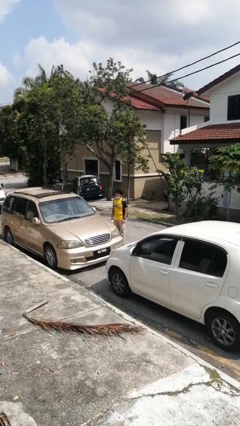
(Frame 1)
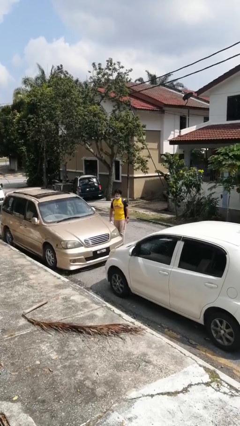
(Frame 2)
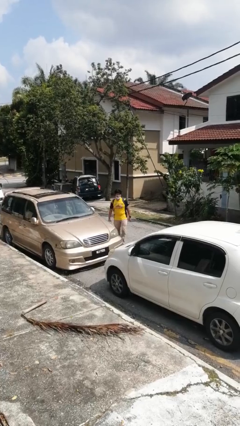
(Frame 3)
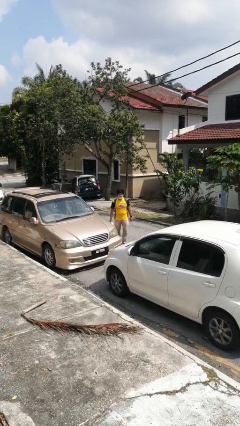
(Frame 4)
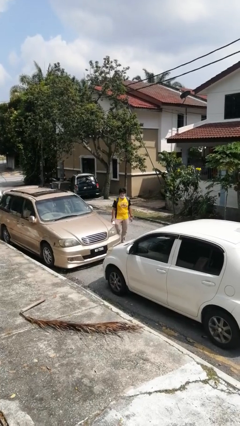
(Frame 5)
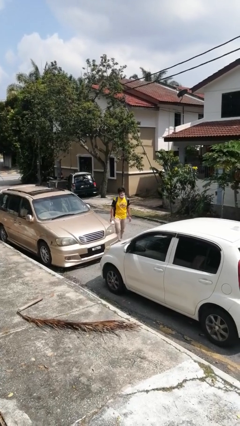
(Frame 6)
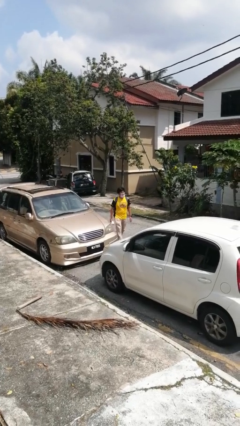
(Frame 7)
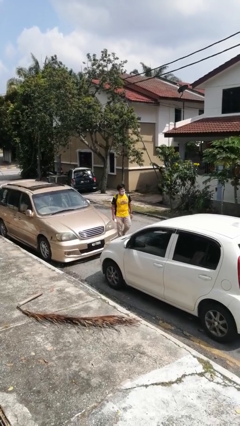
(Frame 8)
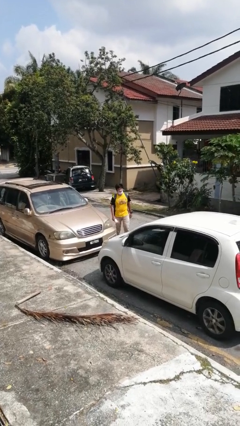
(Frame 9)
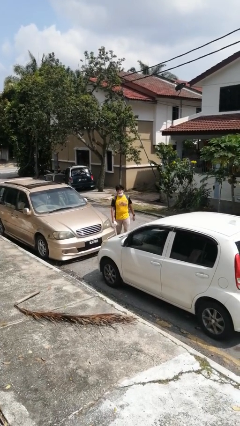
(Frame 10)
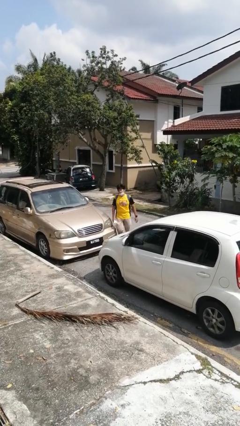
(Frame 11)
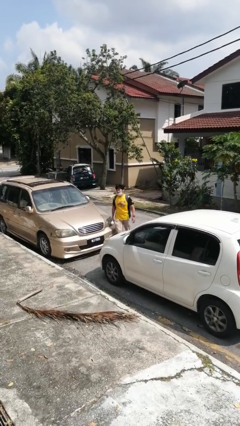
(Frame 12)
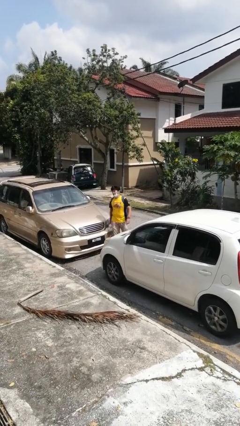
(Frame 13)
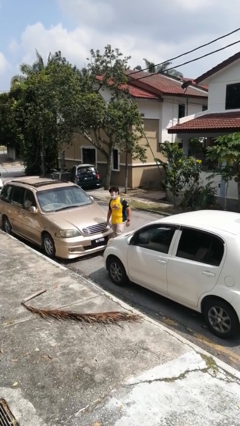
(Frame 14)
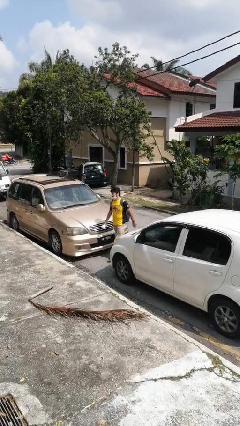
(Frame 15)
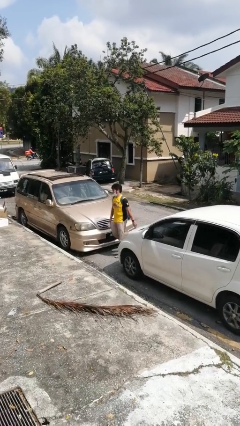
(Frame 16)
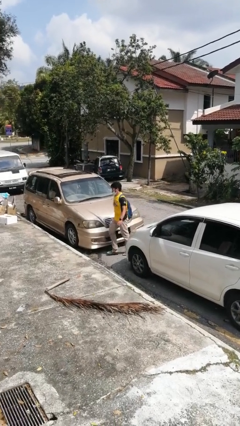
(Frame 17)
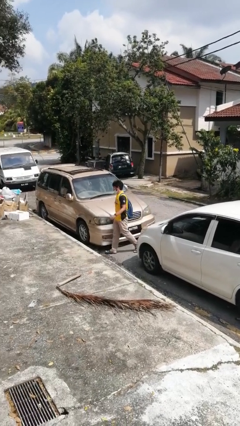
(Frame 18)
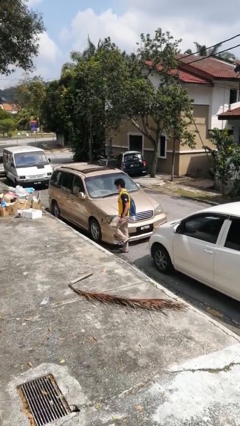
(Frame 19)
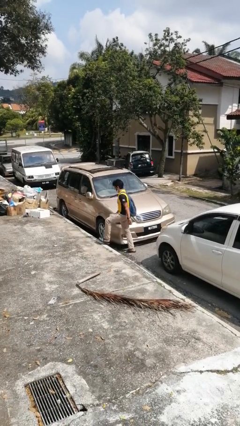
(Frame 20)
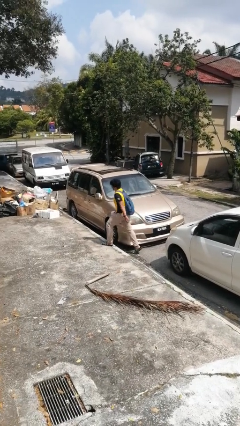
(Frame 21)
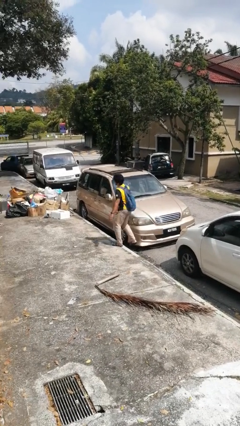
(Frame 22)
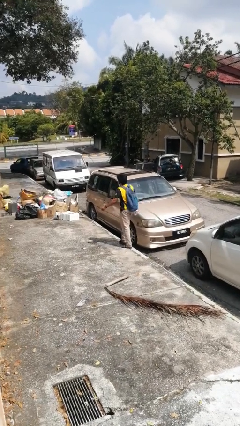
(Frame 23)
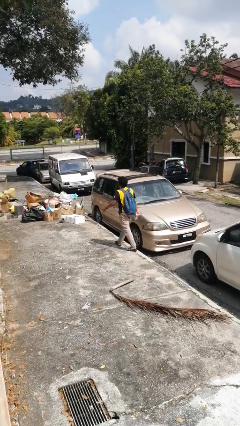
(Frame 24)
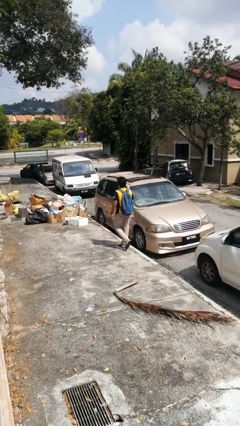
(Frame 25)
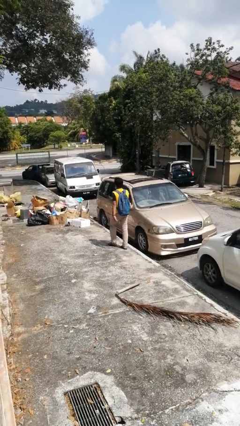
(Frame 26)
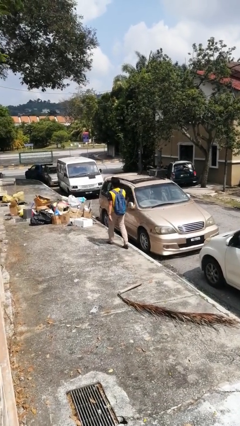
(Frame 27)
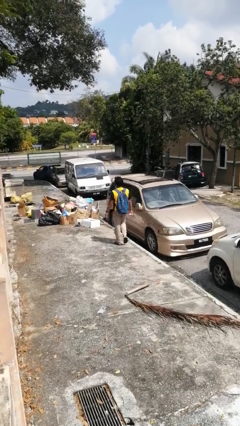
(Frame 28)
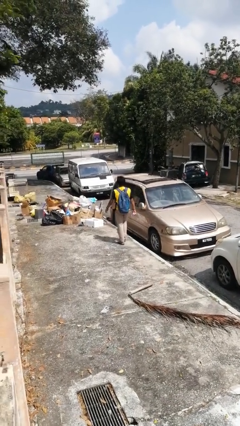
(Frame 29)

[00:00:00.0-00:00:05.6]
person walks around car

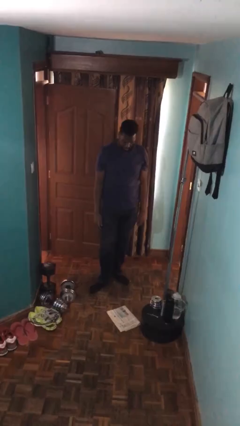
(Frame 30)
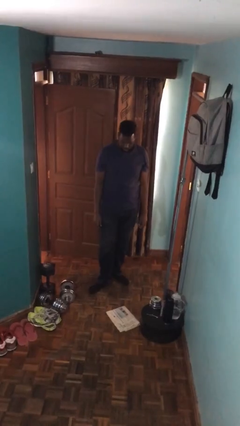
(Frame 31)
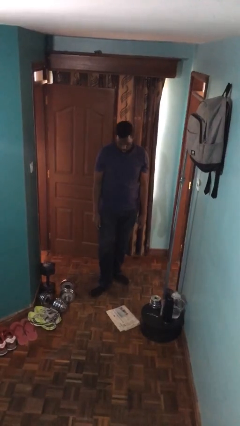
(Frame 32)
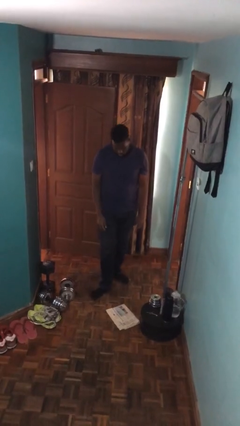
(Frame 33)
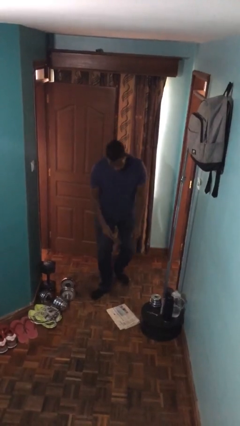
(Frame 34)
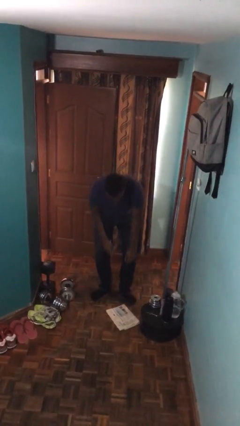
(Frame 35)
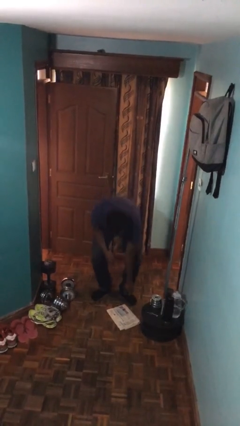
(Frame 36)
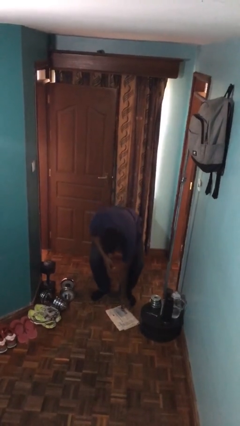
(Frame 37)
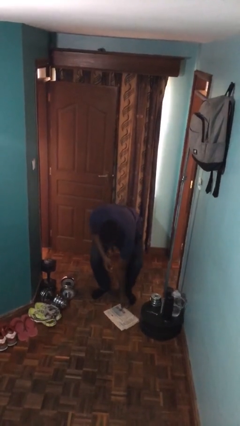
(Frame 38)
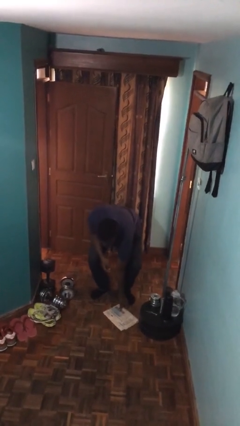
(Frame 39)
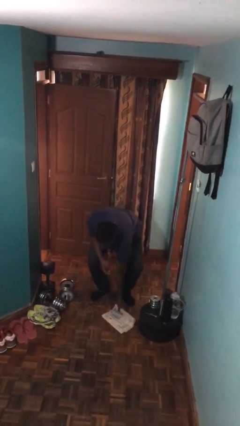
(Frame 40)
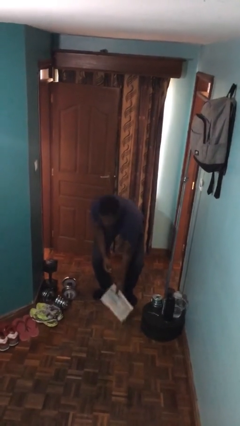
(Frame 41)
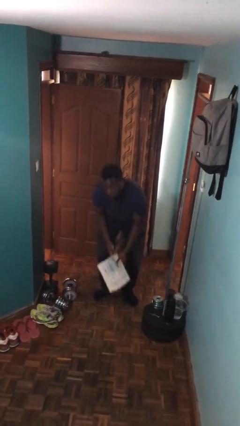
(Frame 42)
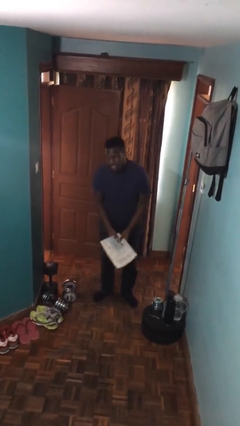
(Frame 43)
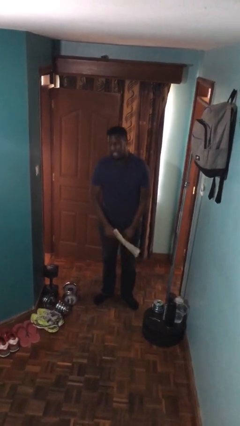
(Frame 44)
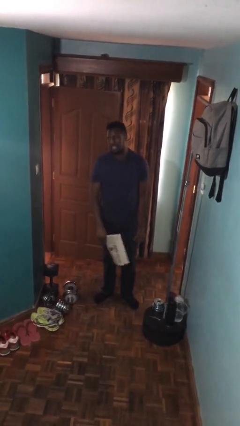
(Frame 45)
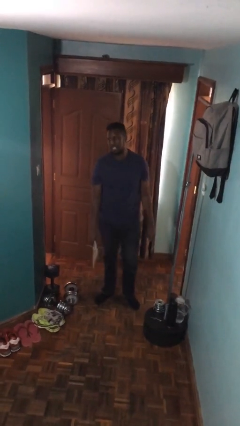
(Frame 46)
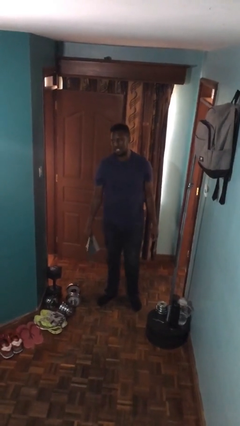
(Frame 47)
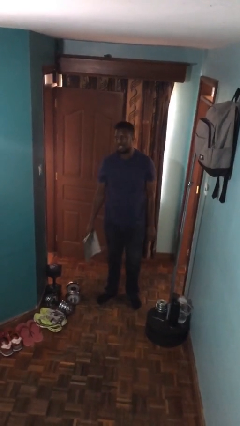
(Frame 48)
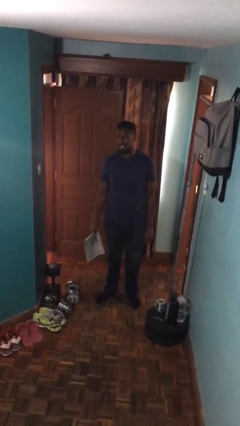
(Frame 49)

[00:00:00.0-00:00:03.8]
person picks up object from floor

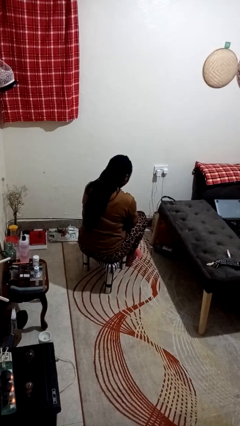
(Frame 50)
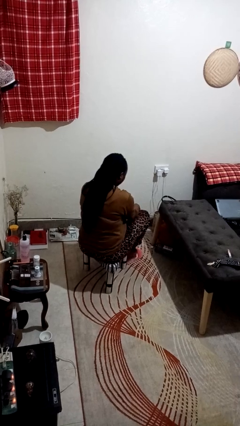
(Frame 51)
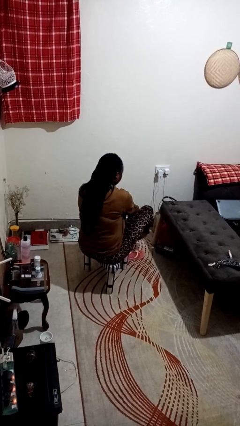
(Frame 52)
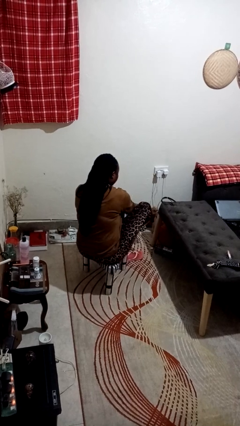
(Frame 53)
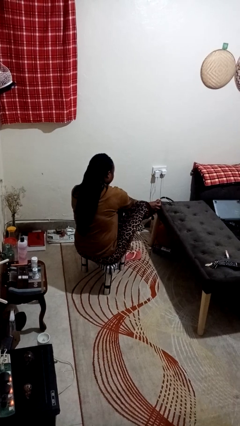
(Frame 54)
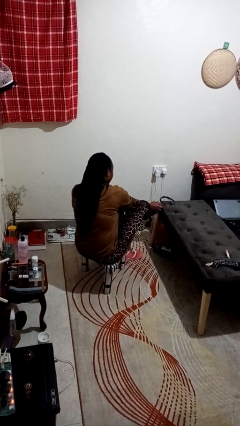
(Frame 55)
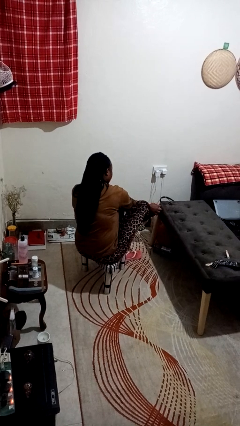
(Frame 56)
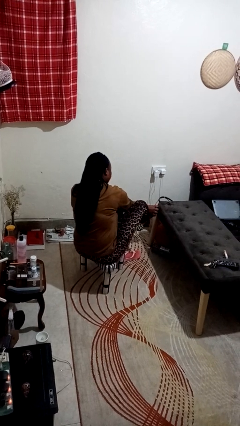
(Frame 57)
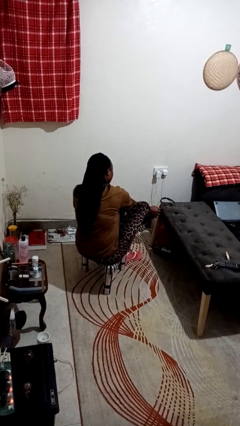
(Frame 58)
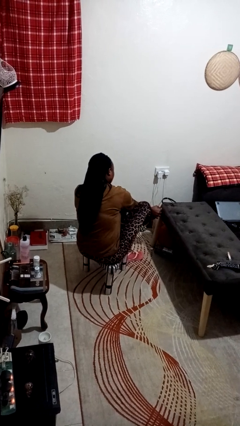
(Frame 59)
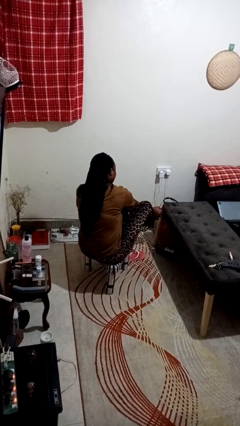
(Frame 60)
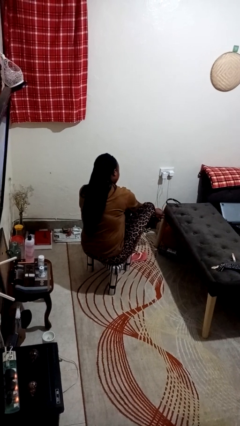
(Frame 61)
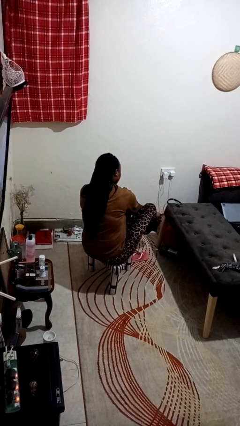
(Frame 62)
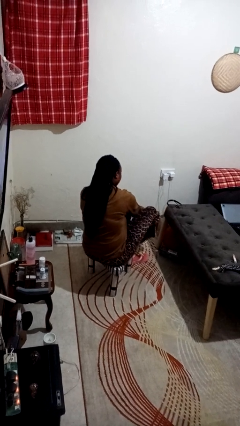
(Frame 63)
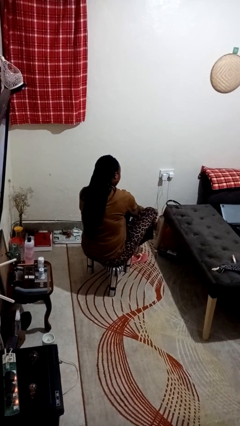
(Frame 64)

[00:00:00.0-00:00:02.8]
person rubs foot

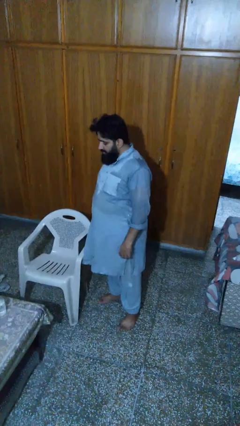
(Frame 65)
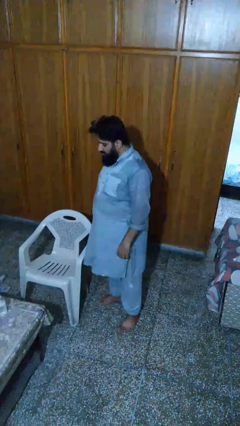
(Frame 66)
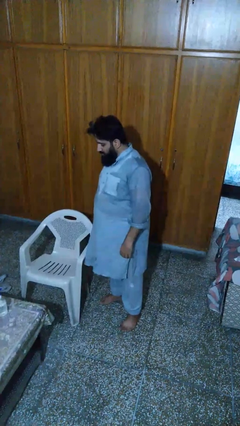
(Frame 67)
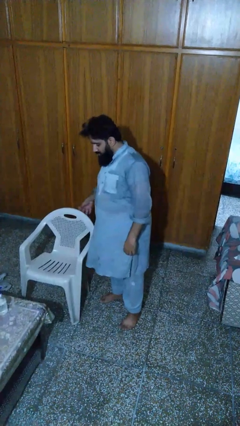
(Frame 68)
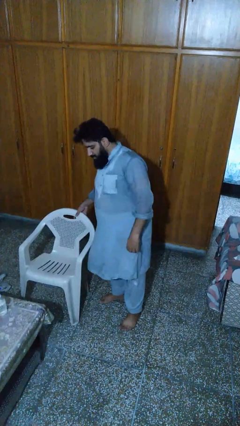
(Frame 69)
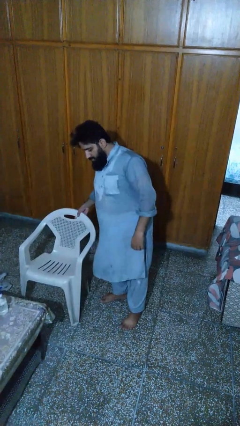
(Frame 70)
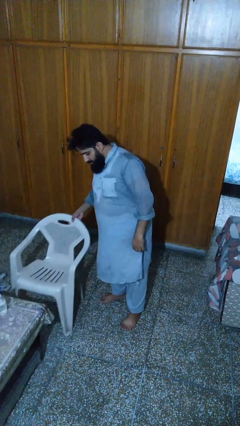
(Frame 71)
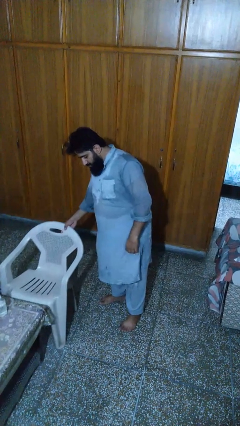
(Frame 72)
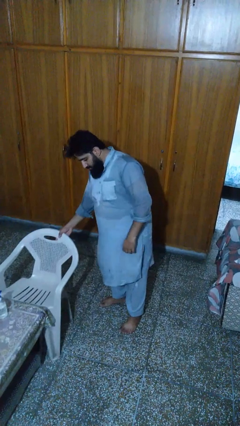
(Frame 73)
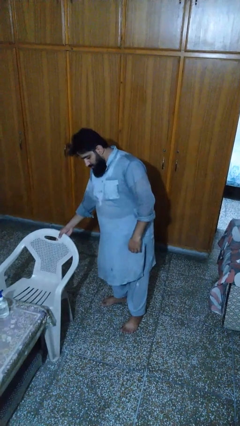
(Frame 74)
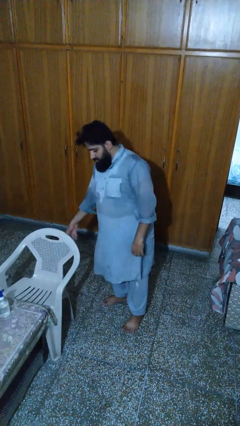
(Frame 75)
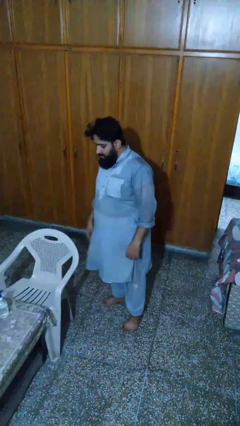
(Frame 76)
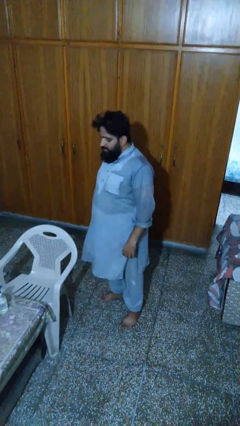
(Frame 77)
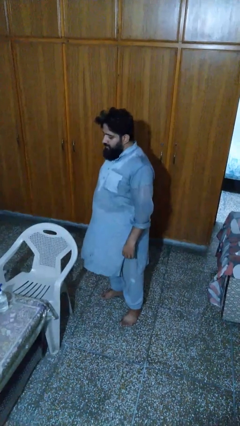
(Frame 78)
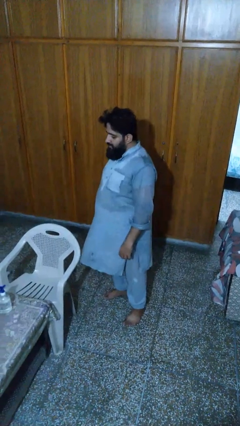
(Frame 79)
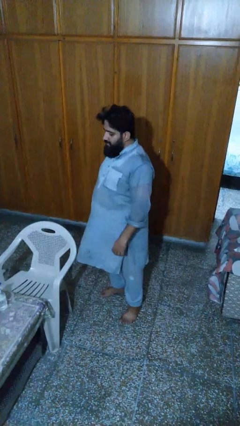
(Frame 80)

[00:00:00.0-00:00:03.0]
person pushes in chair

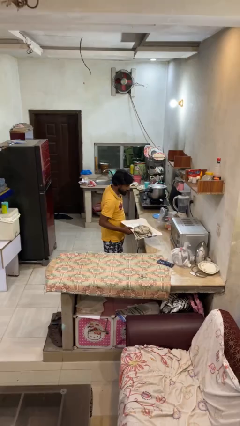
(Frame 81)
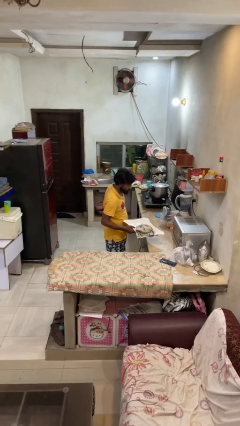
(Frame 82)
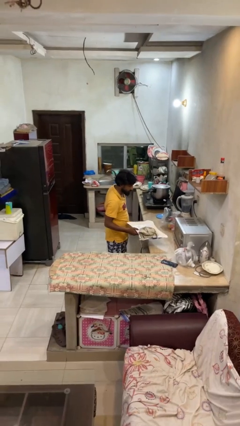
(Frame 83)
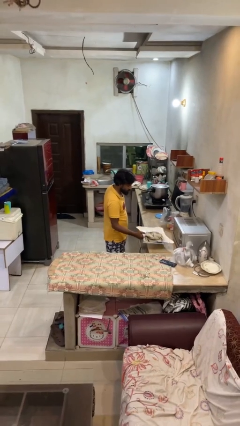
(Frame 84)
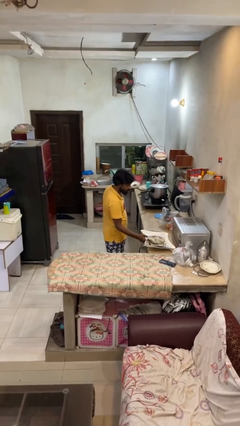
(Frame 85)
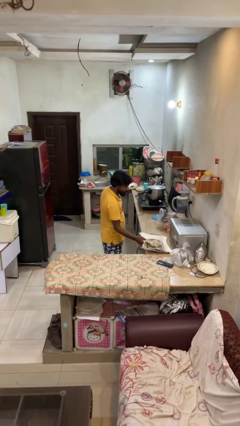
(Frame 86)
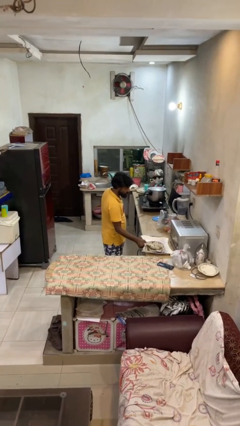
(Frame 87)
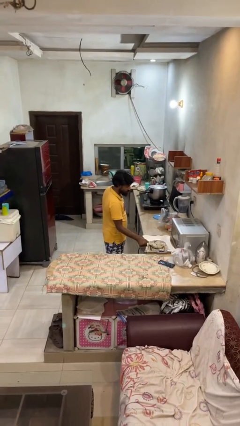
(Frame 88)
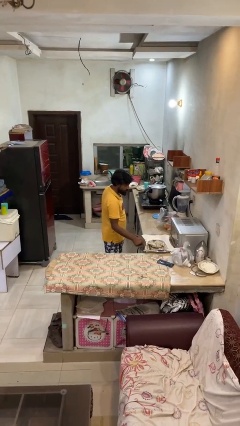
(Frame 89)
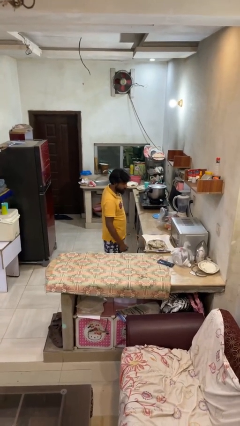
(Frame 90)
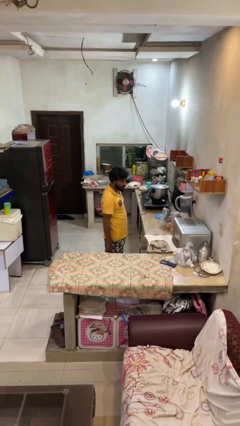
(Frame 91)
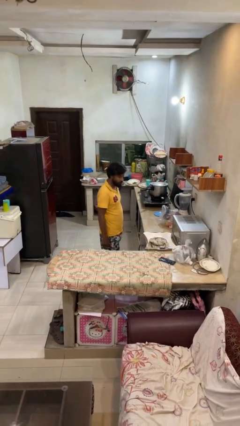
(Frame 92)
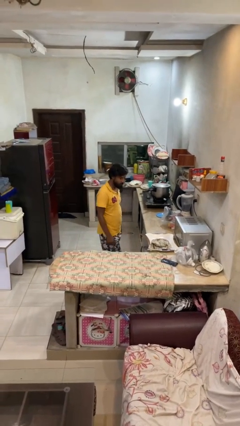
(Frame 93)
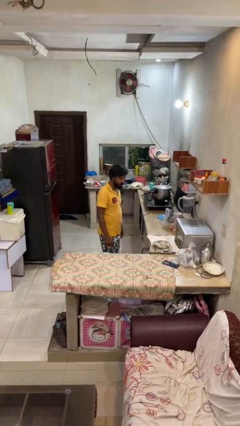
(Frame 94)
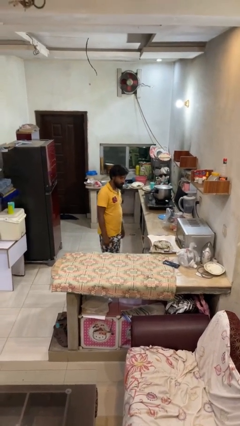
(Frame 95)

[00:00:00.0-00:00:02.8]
person puts down object on countertop
